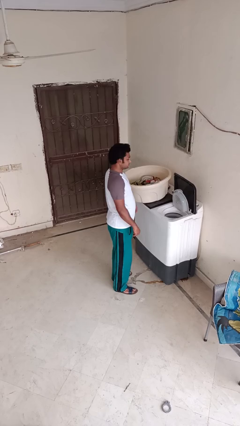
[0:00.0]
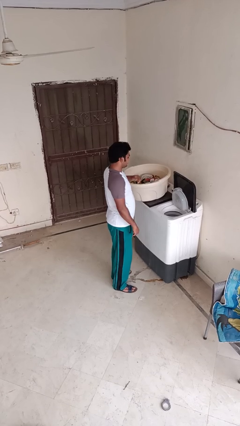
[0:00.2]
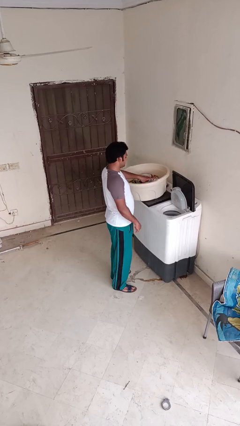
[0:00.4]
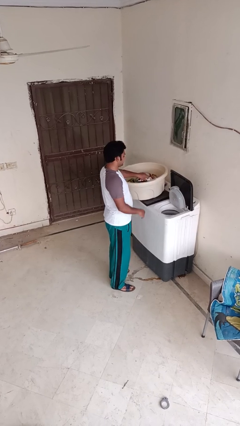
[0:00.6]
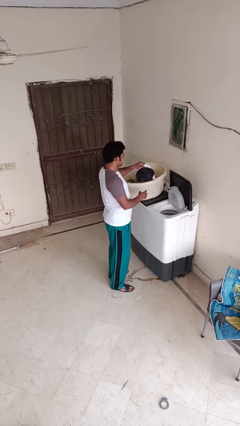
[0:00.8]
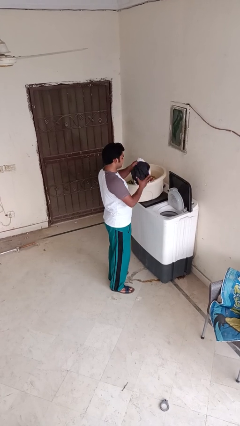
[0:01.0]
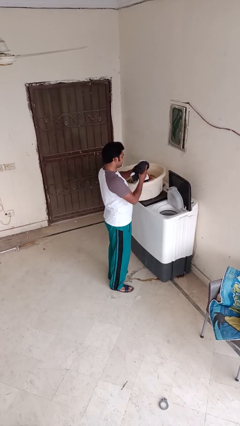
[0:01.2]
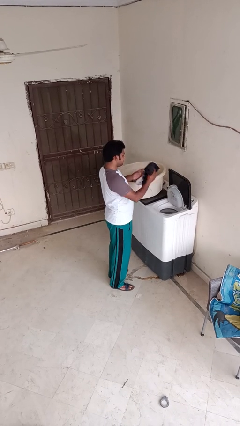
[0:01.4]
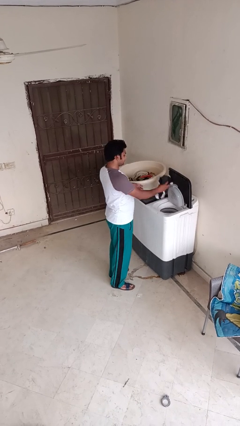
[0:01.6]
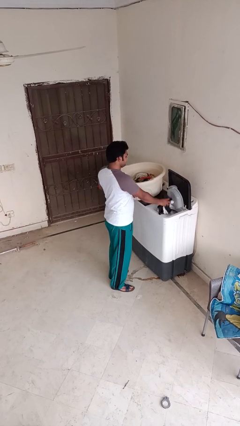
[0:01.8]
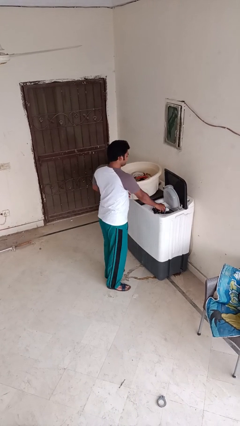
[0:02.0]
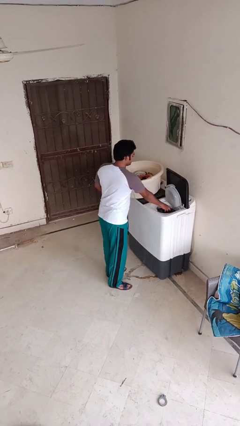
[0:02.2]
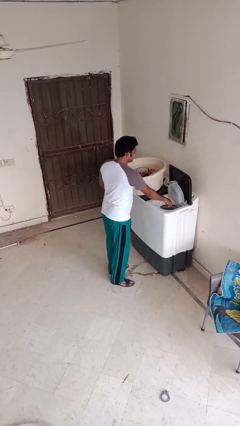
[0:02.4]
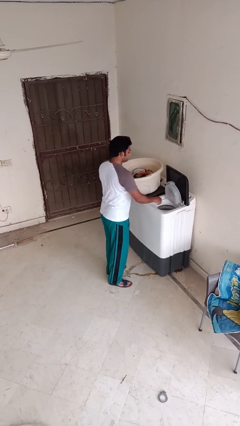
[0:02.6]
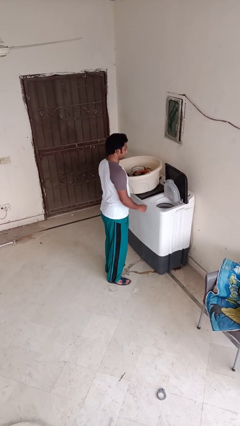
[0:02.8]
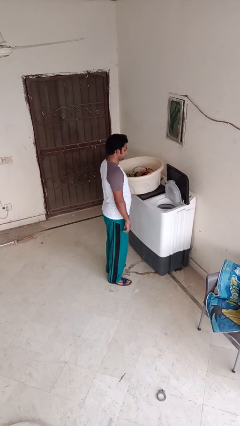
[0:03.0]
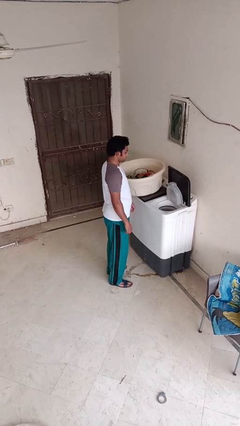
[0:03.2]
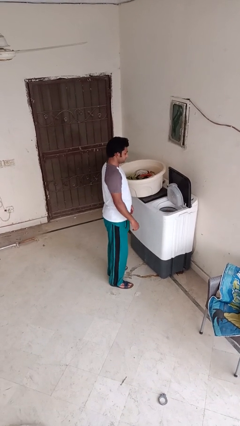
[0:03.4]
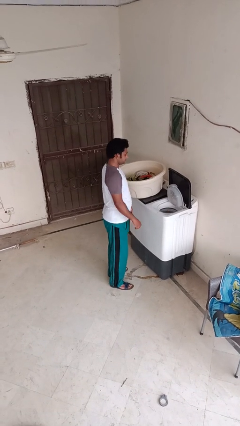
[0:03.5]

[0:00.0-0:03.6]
person loads dryer

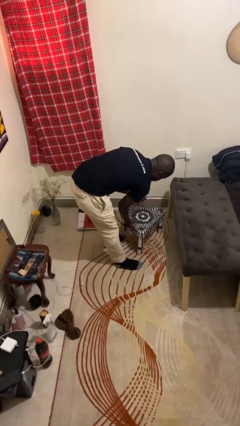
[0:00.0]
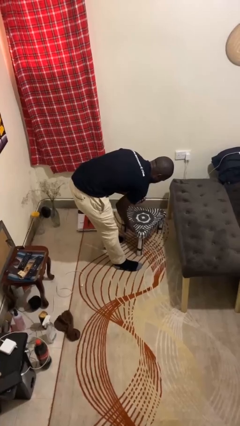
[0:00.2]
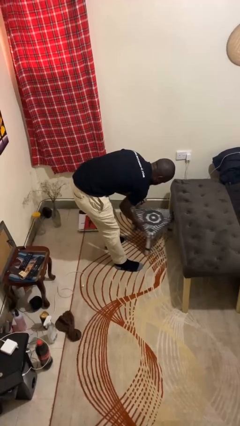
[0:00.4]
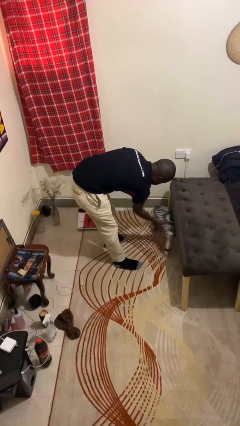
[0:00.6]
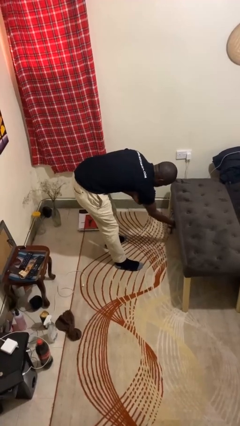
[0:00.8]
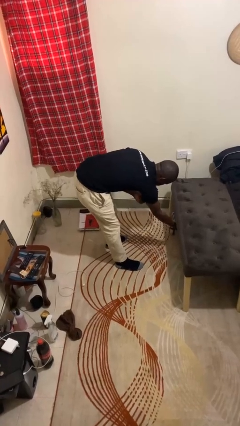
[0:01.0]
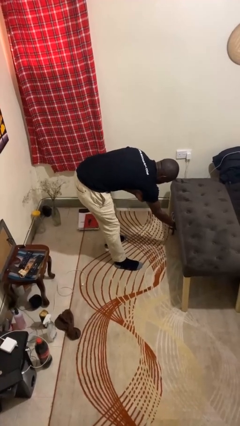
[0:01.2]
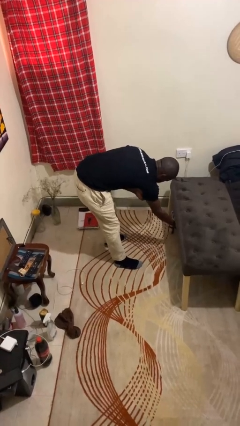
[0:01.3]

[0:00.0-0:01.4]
person pushes in chair

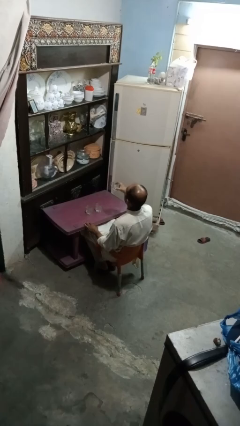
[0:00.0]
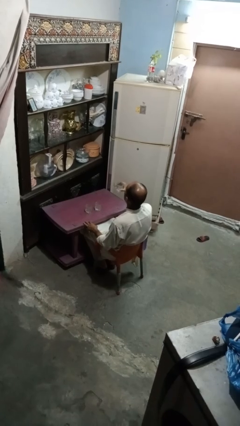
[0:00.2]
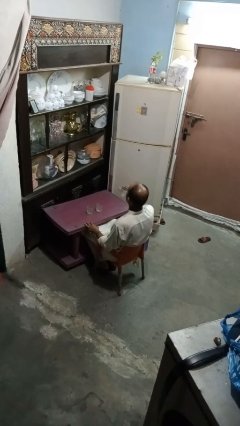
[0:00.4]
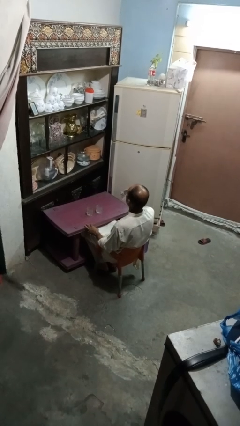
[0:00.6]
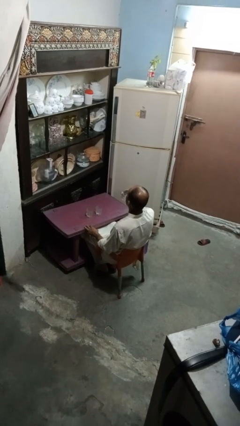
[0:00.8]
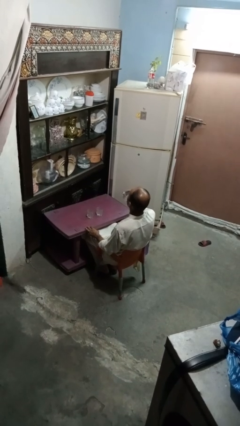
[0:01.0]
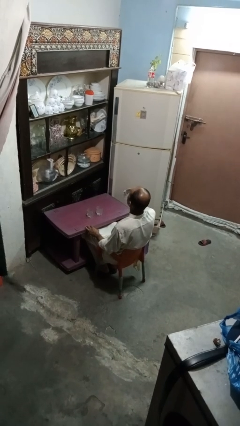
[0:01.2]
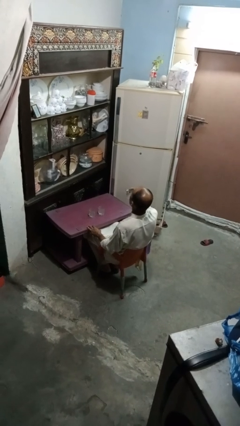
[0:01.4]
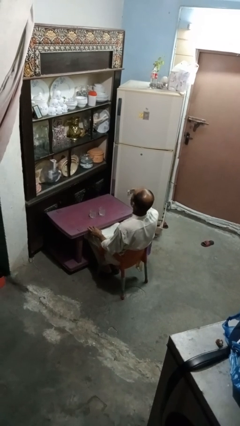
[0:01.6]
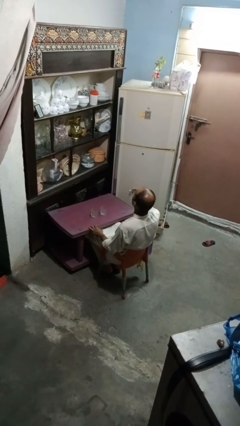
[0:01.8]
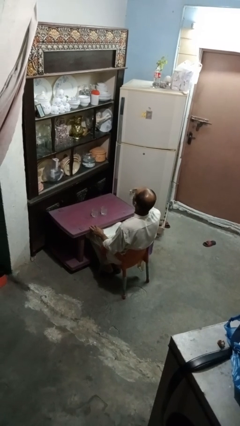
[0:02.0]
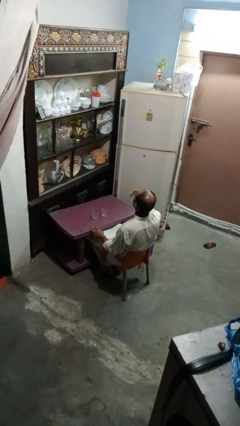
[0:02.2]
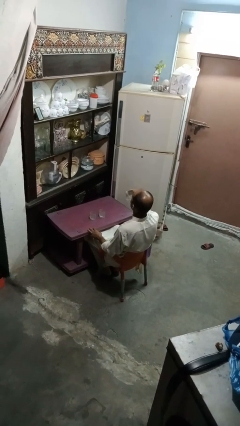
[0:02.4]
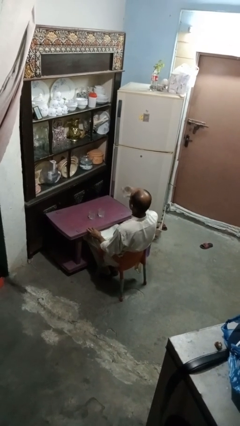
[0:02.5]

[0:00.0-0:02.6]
person drinks from shotglass

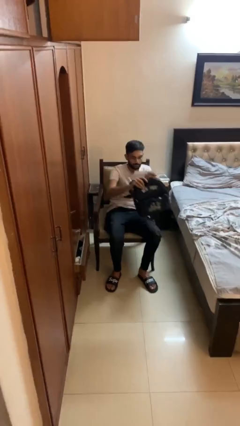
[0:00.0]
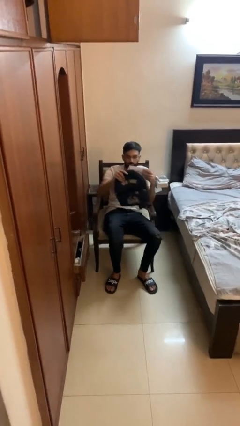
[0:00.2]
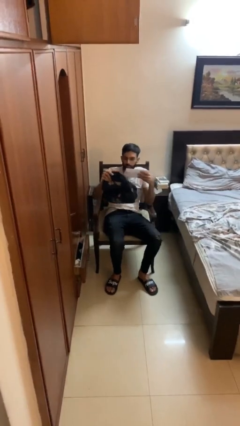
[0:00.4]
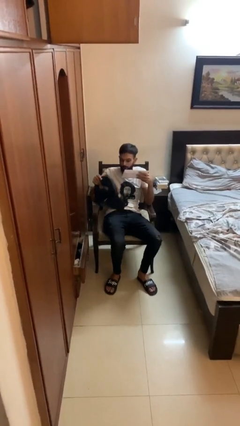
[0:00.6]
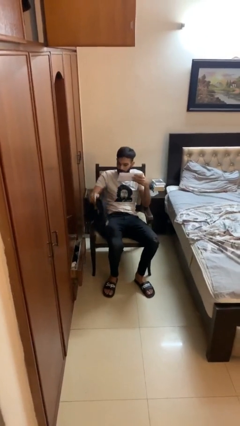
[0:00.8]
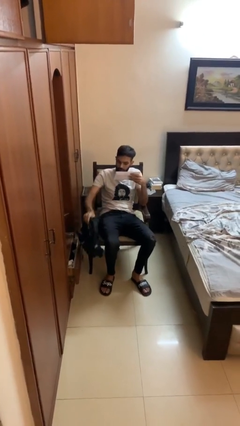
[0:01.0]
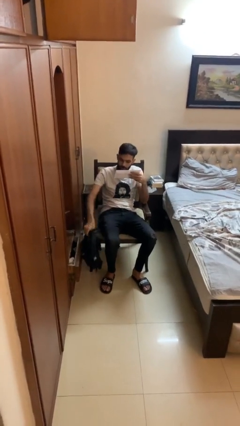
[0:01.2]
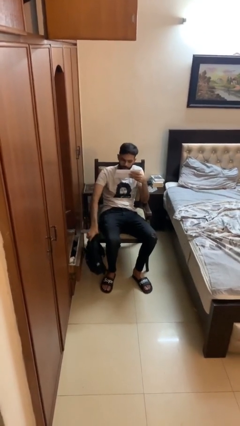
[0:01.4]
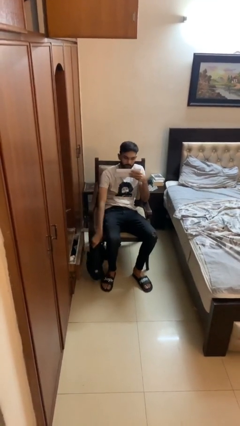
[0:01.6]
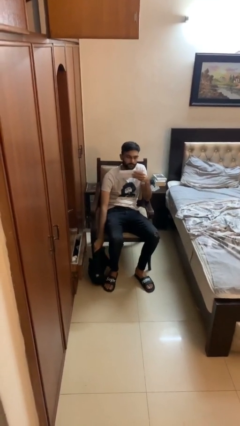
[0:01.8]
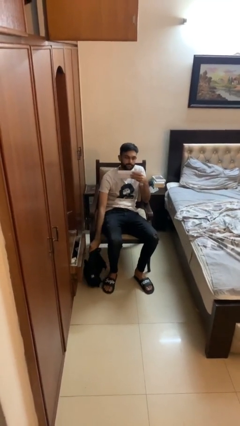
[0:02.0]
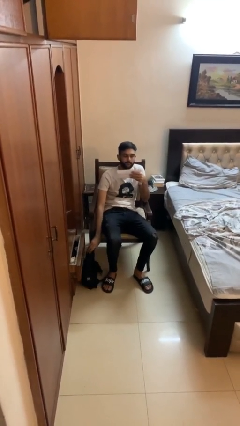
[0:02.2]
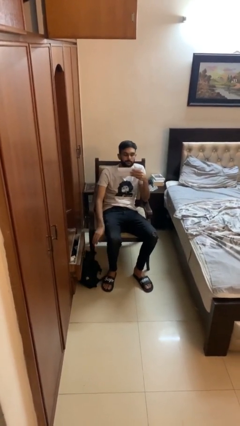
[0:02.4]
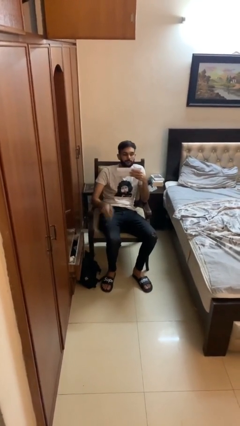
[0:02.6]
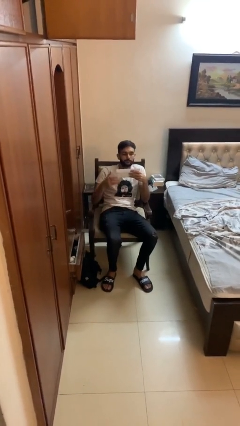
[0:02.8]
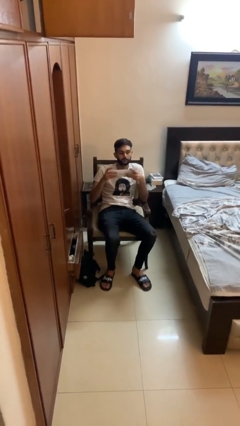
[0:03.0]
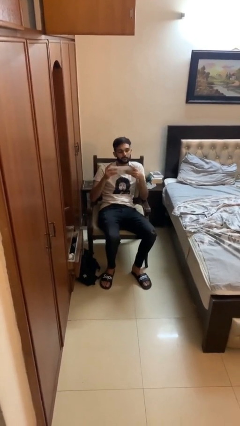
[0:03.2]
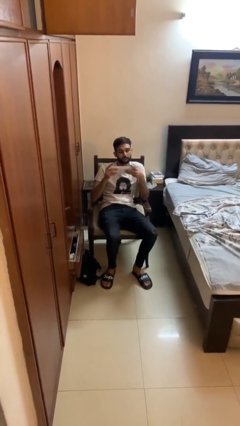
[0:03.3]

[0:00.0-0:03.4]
person puts down object on floor

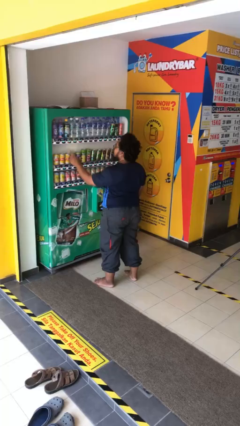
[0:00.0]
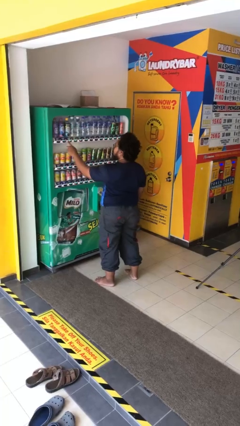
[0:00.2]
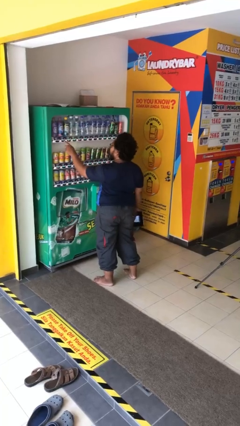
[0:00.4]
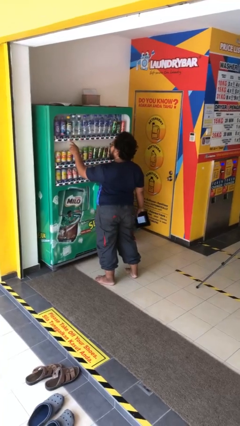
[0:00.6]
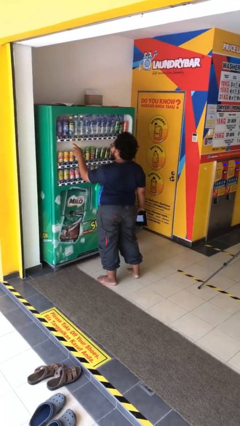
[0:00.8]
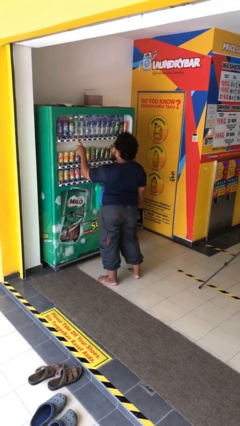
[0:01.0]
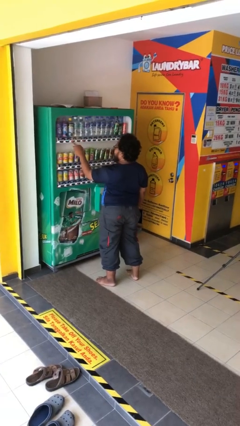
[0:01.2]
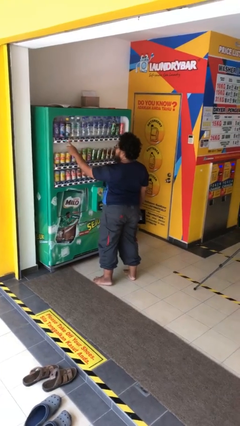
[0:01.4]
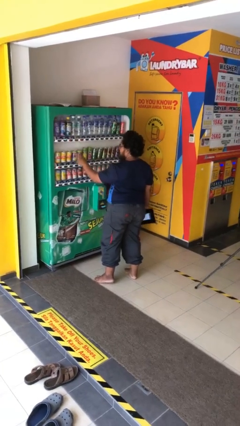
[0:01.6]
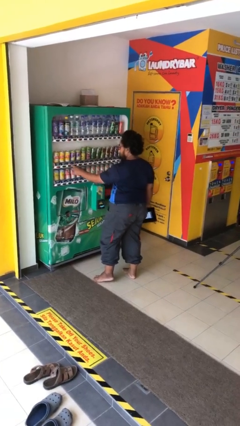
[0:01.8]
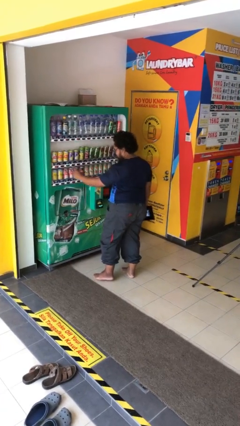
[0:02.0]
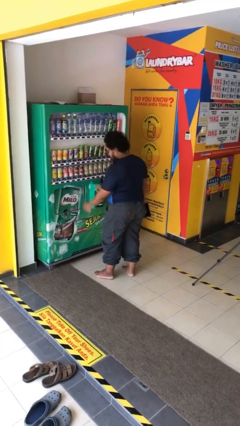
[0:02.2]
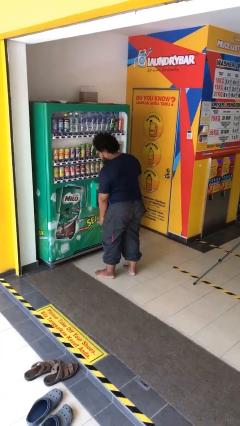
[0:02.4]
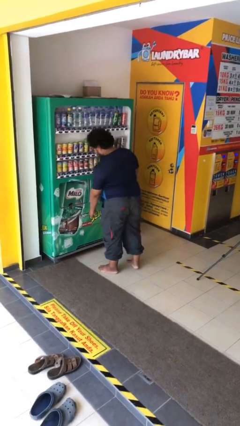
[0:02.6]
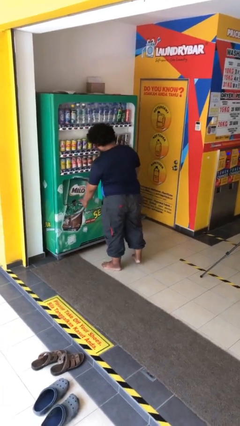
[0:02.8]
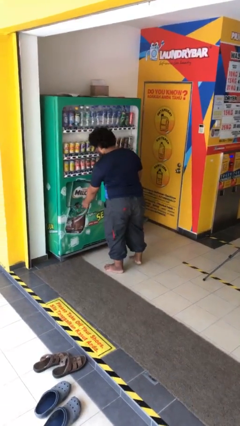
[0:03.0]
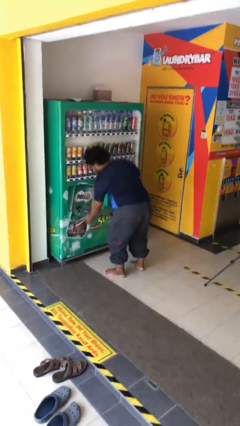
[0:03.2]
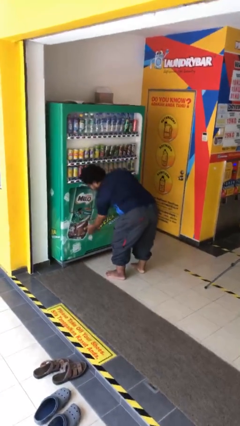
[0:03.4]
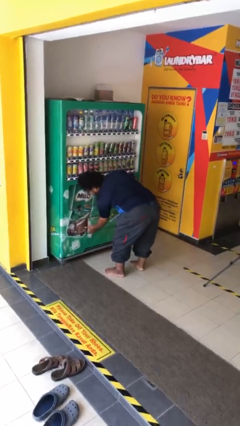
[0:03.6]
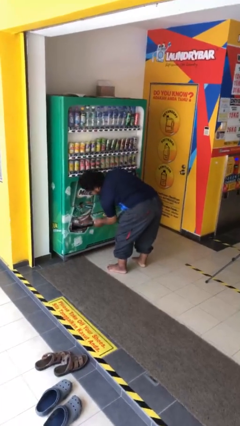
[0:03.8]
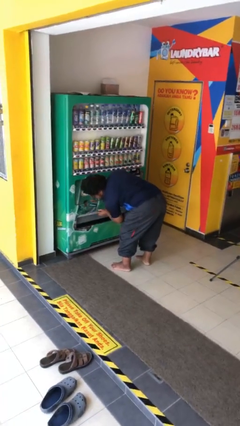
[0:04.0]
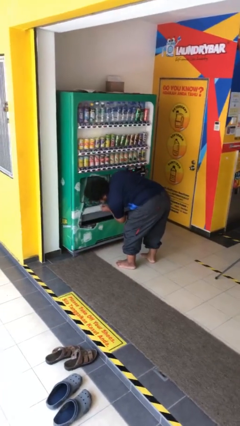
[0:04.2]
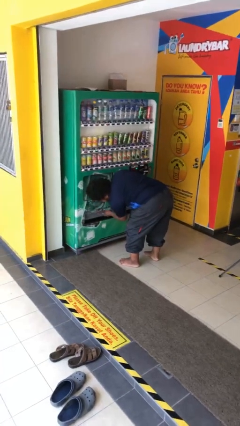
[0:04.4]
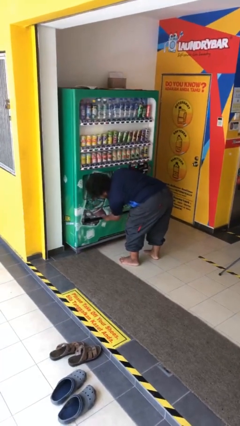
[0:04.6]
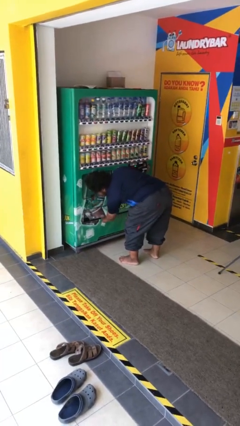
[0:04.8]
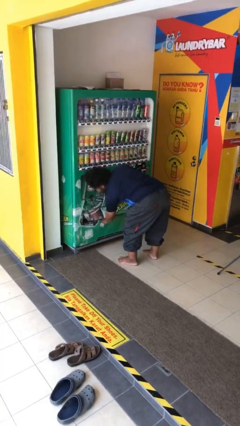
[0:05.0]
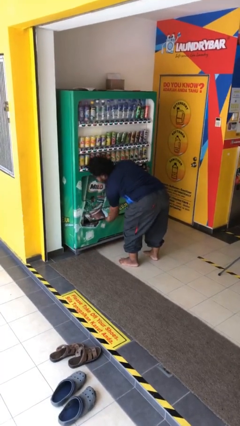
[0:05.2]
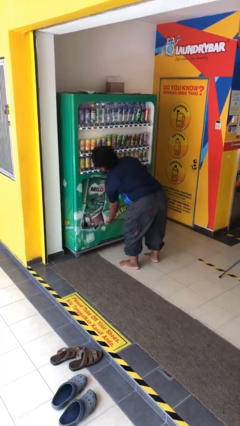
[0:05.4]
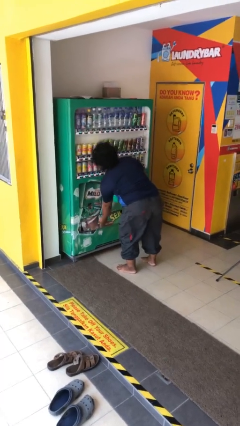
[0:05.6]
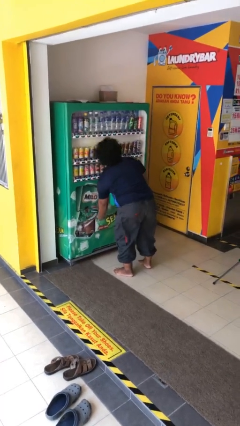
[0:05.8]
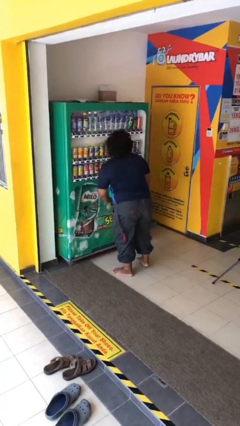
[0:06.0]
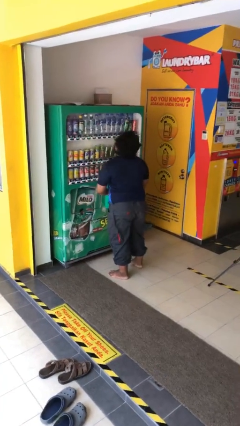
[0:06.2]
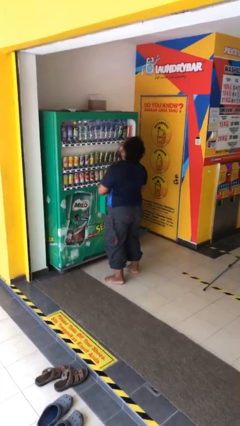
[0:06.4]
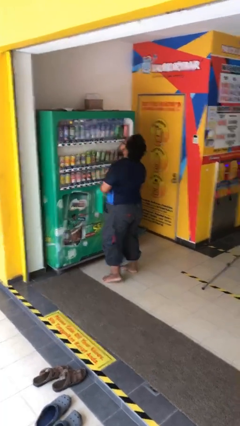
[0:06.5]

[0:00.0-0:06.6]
person purchases from machine

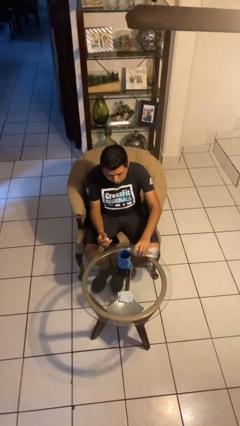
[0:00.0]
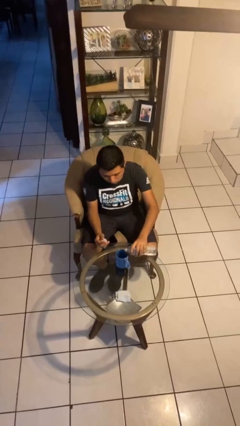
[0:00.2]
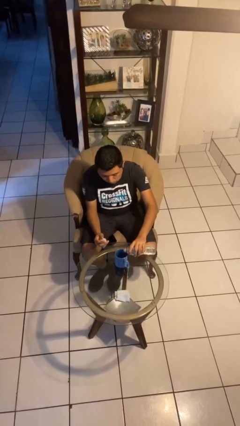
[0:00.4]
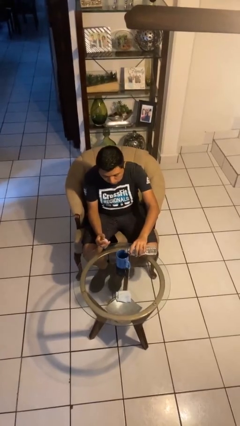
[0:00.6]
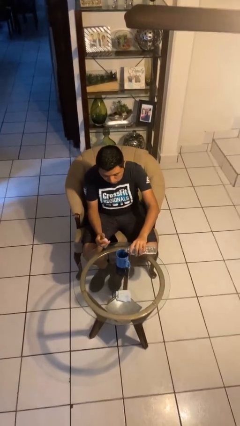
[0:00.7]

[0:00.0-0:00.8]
person pours liquid into cup
